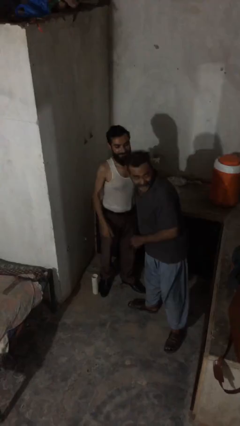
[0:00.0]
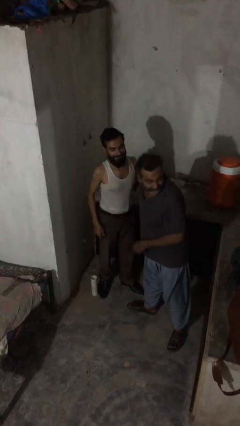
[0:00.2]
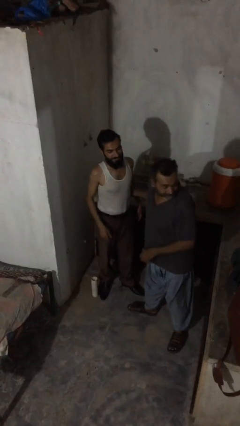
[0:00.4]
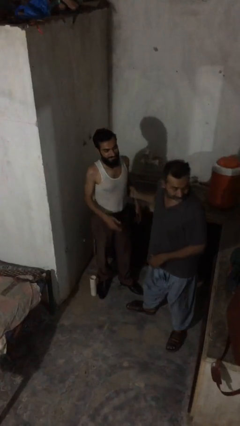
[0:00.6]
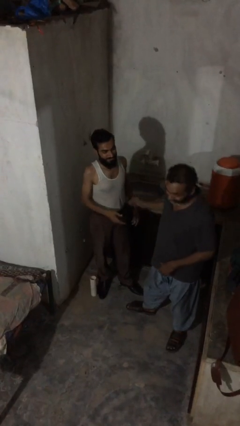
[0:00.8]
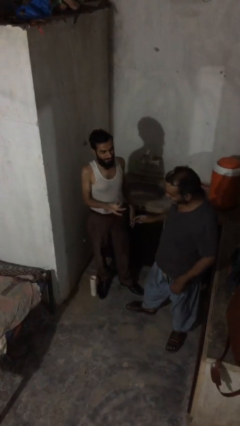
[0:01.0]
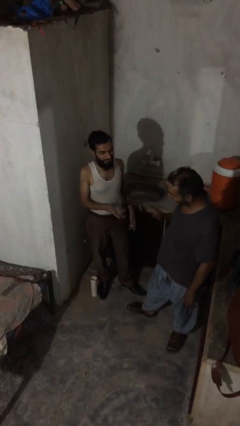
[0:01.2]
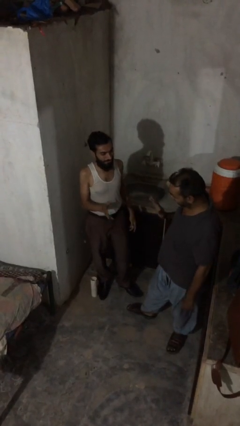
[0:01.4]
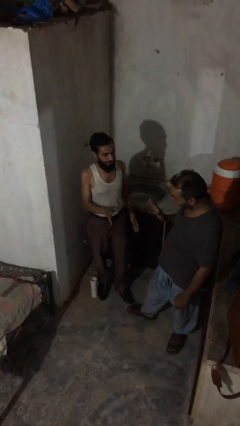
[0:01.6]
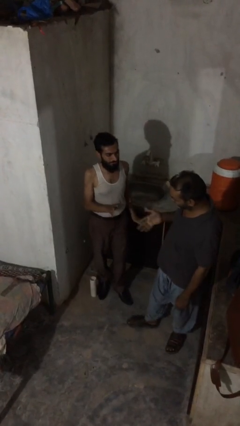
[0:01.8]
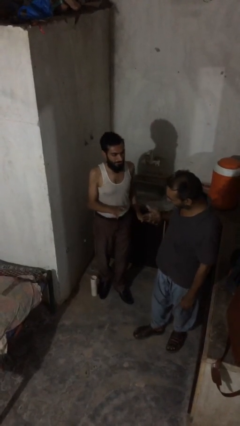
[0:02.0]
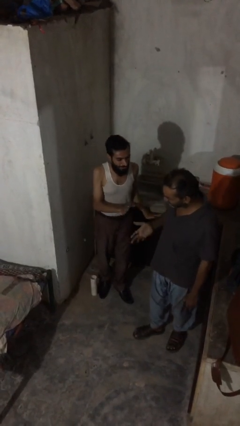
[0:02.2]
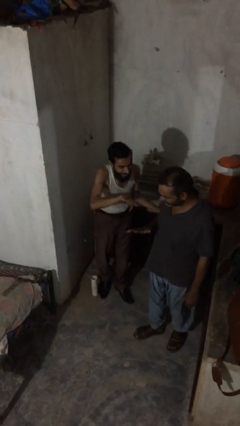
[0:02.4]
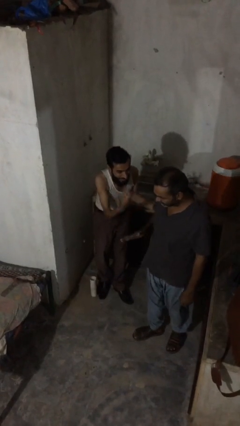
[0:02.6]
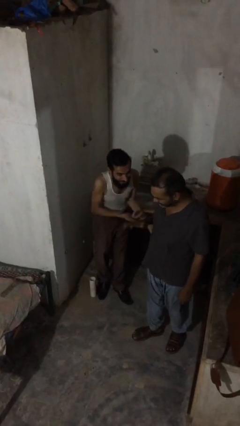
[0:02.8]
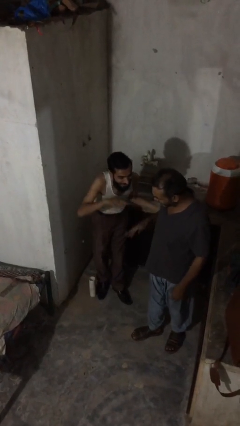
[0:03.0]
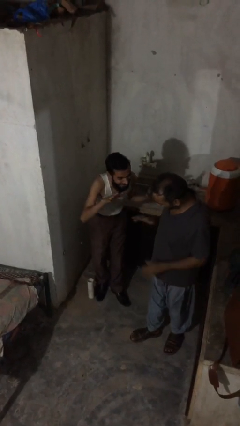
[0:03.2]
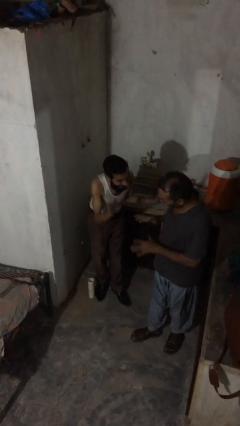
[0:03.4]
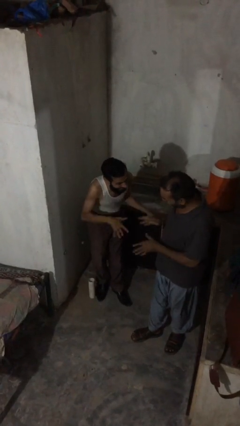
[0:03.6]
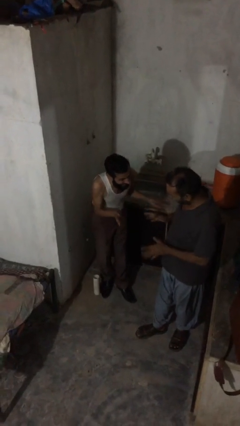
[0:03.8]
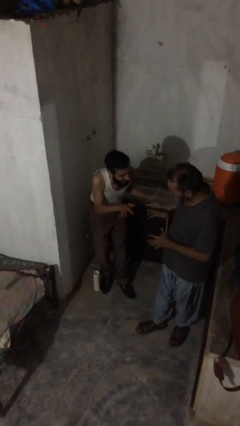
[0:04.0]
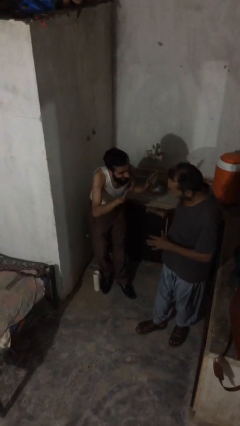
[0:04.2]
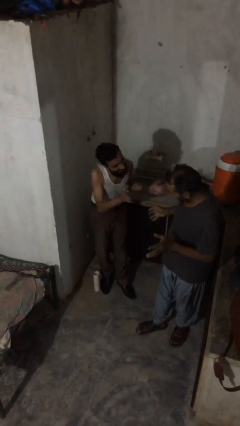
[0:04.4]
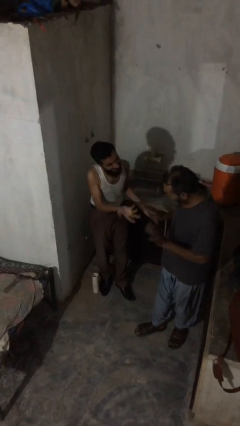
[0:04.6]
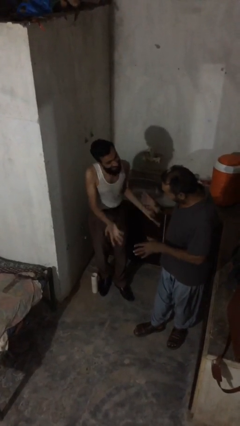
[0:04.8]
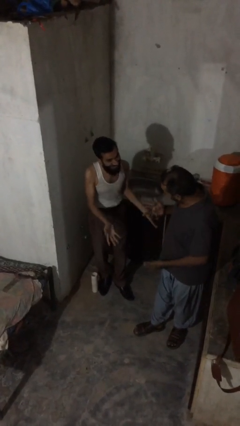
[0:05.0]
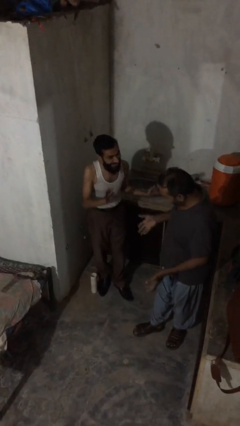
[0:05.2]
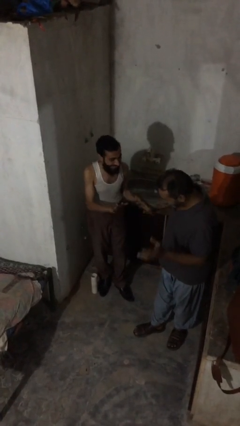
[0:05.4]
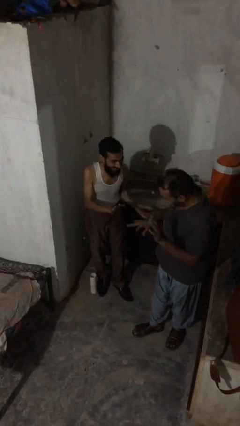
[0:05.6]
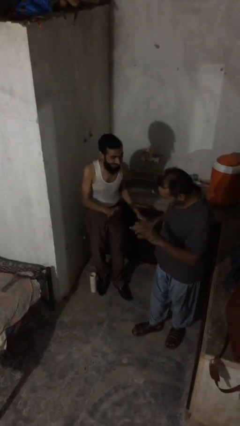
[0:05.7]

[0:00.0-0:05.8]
person talks to person

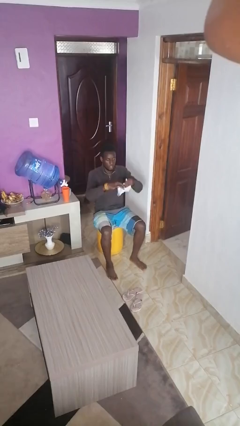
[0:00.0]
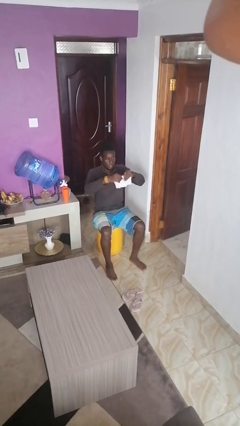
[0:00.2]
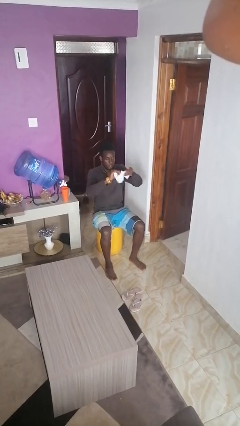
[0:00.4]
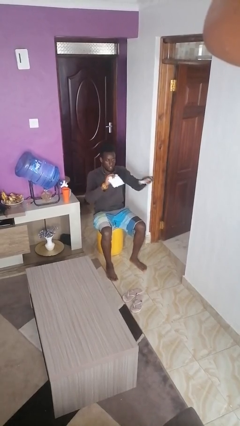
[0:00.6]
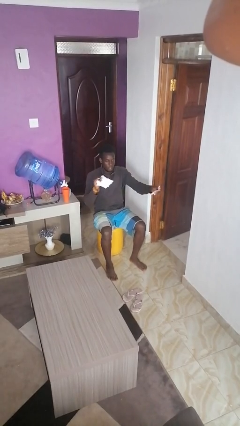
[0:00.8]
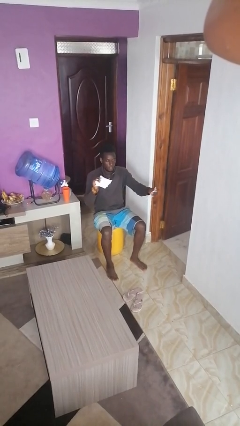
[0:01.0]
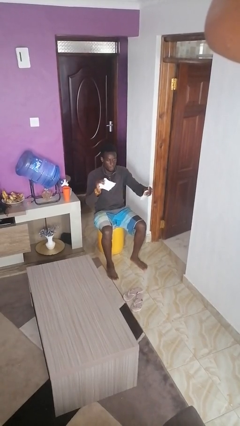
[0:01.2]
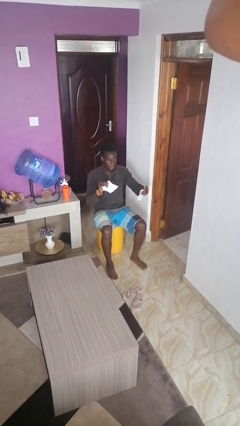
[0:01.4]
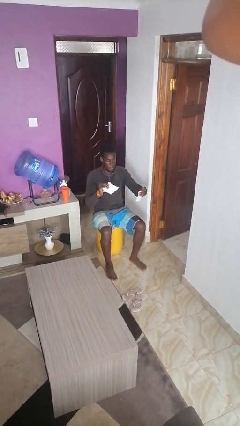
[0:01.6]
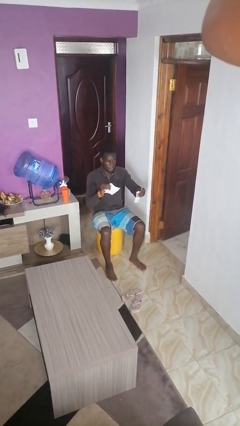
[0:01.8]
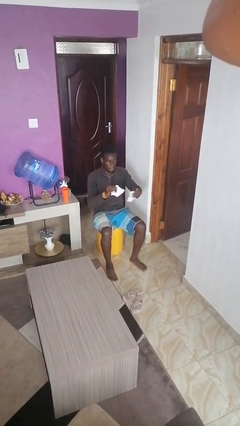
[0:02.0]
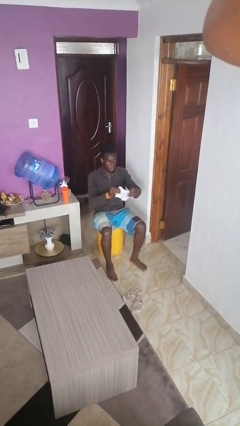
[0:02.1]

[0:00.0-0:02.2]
person tears paper

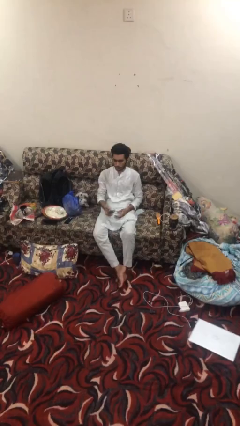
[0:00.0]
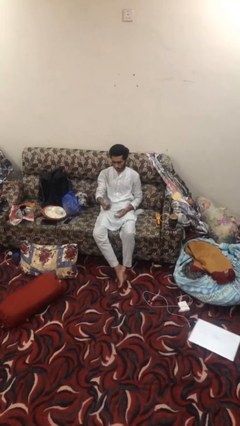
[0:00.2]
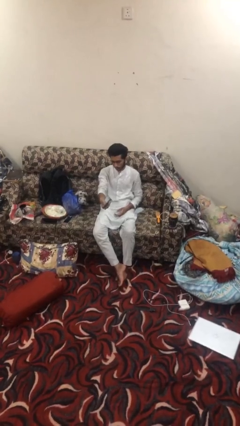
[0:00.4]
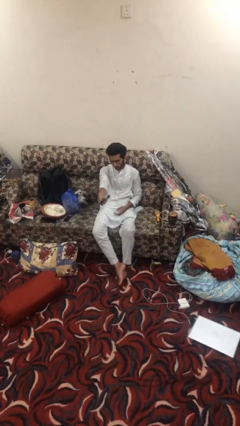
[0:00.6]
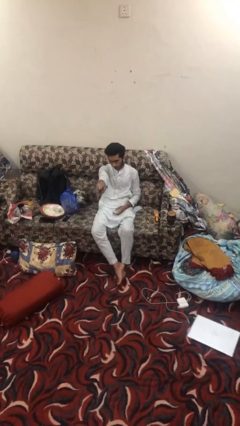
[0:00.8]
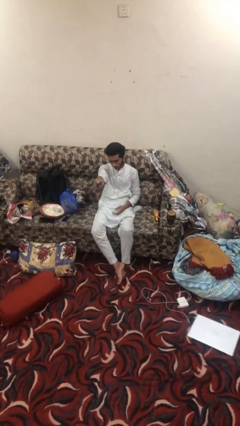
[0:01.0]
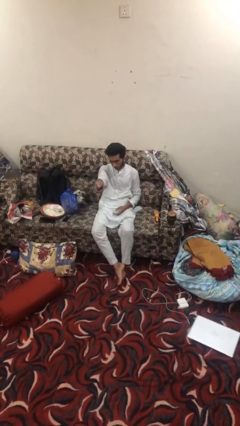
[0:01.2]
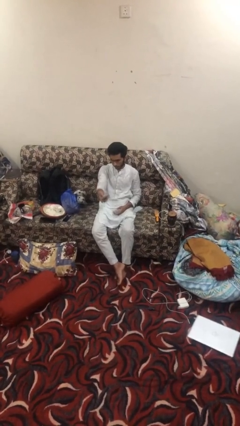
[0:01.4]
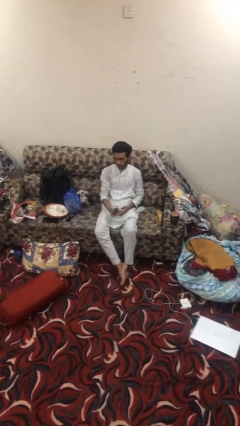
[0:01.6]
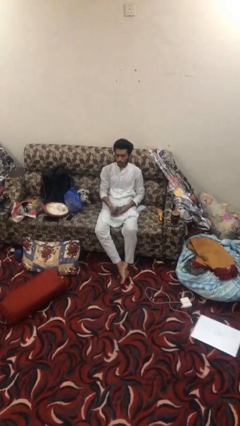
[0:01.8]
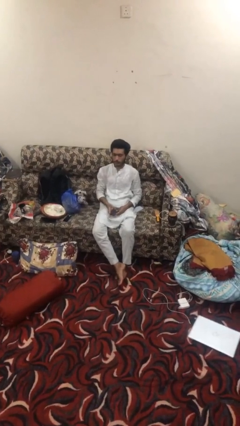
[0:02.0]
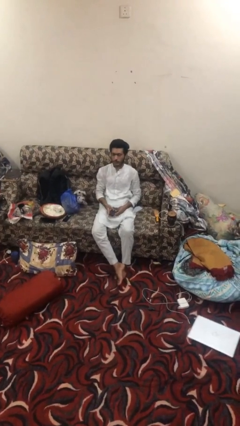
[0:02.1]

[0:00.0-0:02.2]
person uses television remote

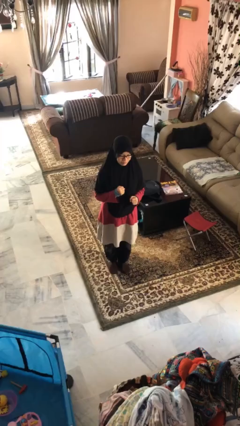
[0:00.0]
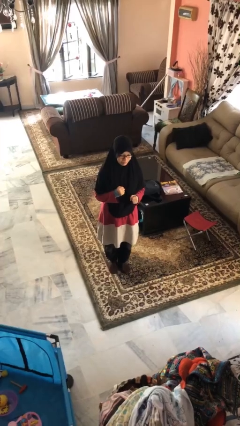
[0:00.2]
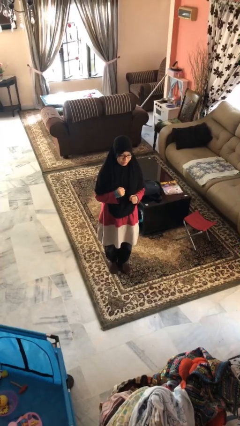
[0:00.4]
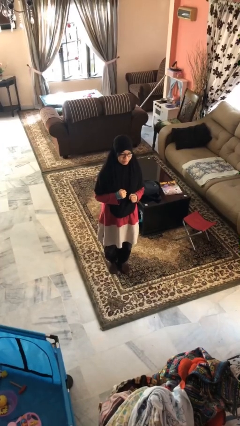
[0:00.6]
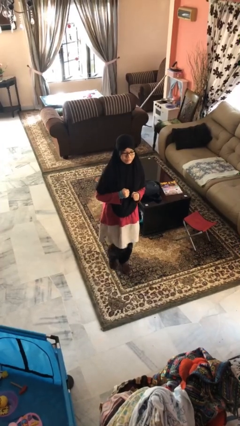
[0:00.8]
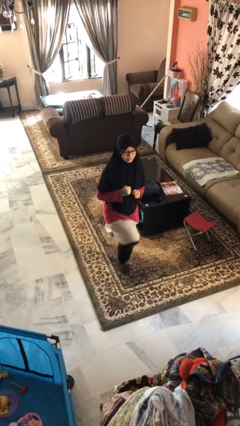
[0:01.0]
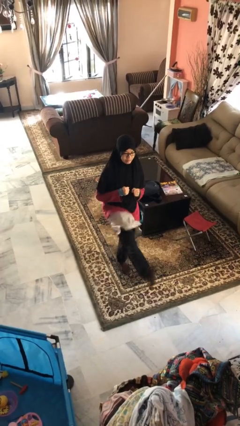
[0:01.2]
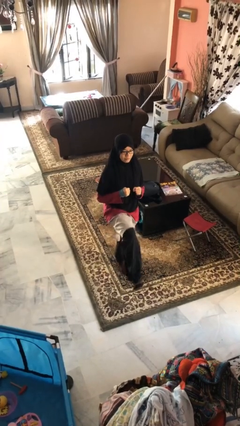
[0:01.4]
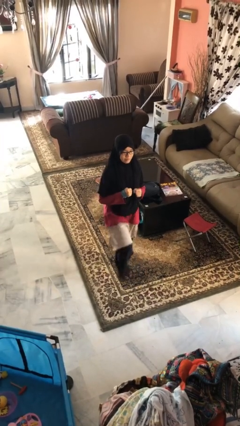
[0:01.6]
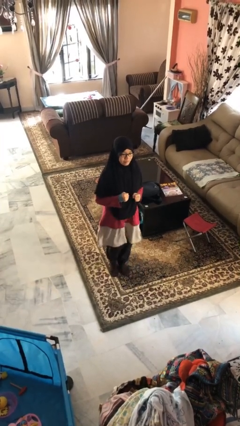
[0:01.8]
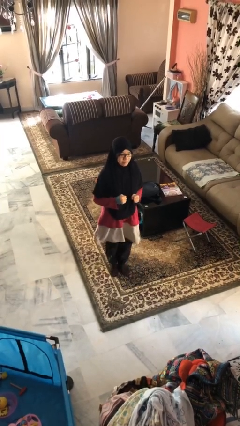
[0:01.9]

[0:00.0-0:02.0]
person karate kicks

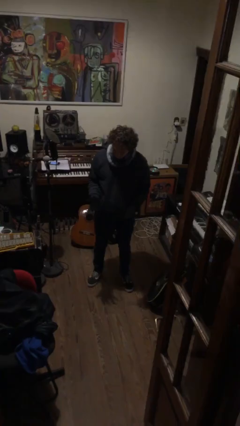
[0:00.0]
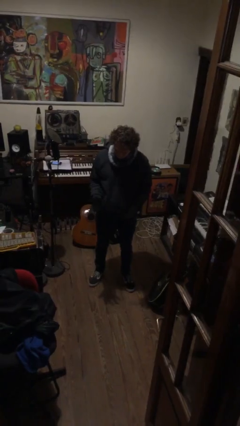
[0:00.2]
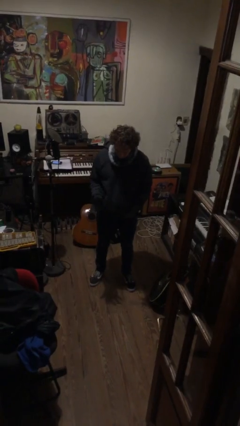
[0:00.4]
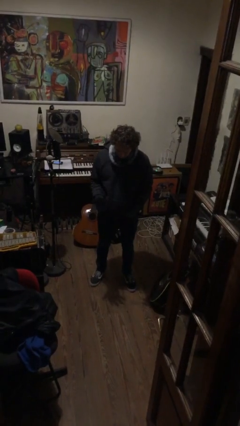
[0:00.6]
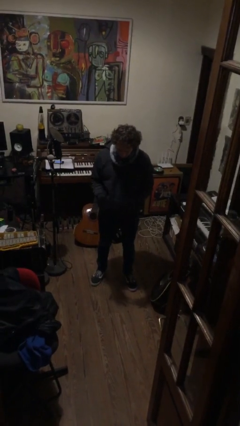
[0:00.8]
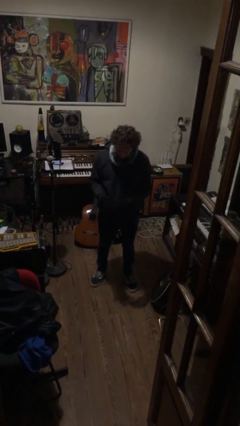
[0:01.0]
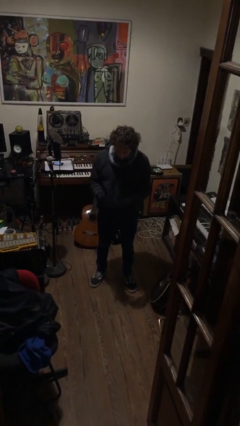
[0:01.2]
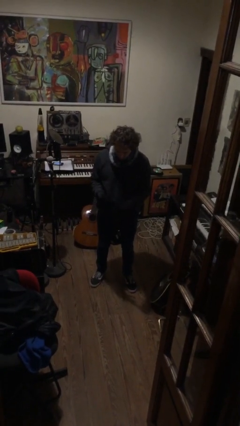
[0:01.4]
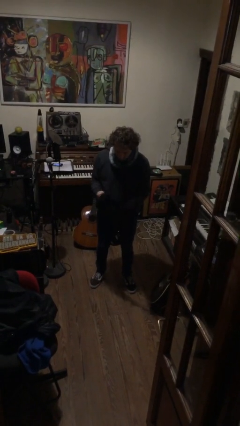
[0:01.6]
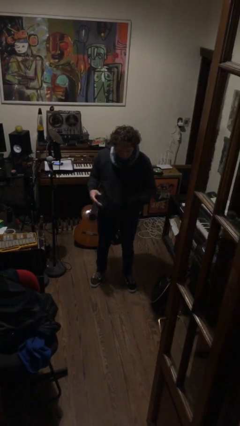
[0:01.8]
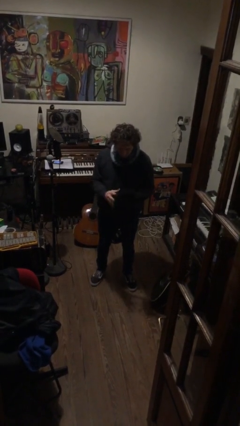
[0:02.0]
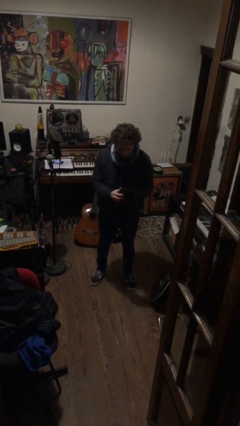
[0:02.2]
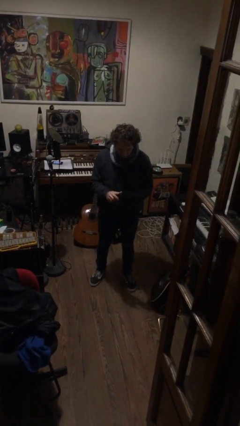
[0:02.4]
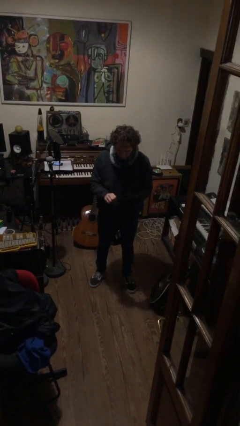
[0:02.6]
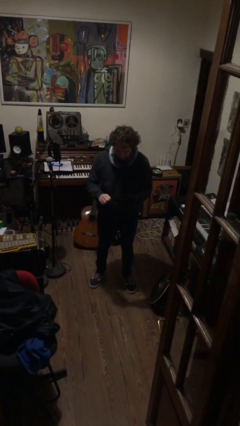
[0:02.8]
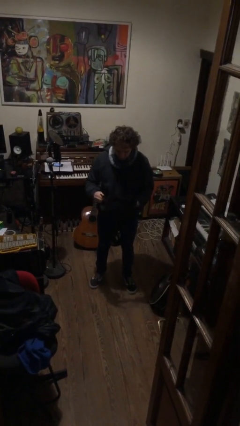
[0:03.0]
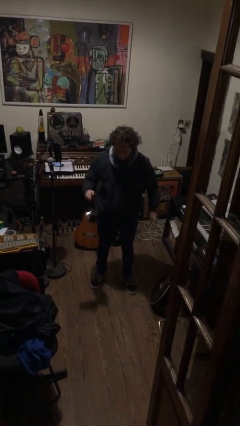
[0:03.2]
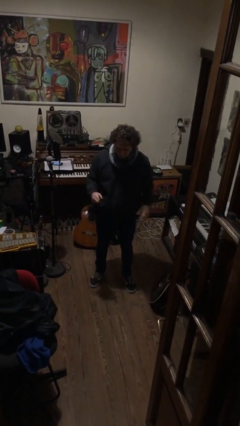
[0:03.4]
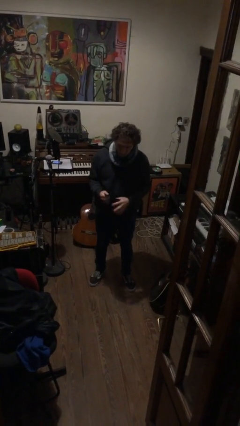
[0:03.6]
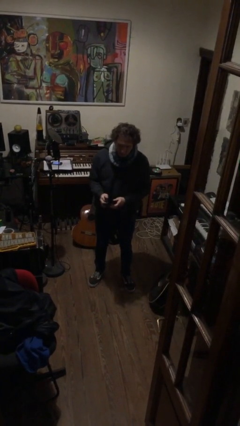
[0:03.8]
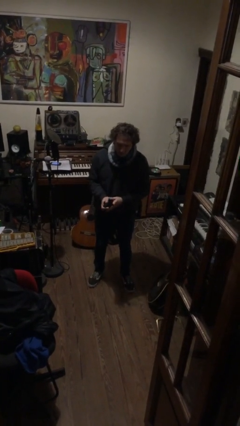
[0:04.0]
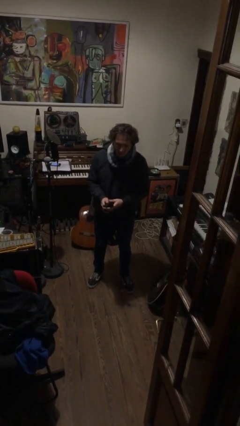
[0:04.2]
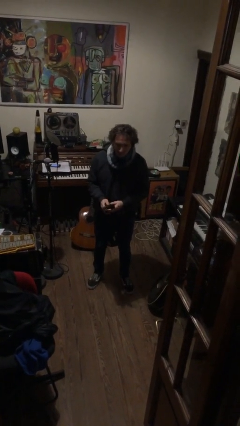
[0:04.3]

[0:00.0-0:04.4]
person takes off gloves

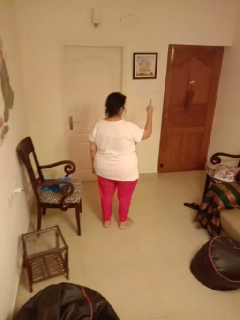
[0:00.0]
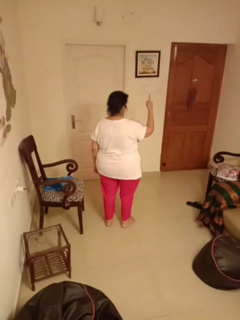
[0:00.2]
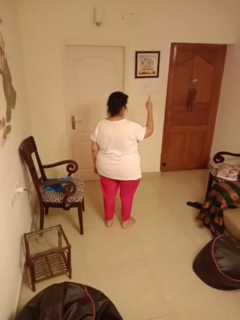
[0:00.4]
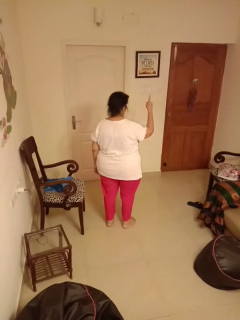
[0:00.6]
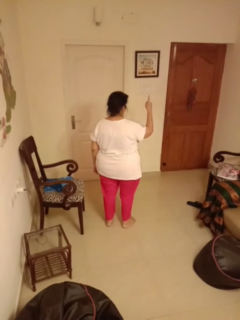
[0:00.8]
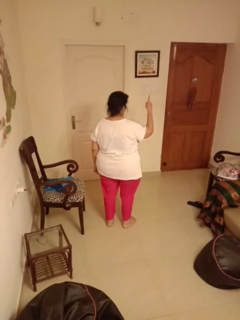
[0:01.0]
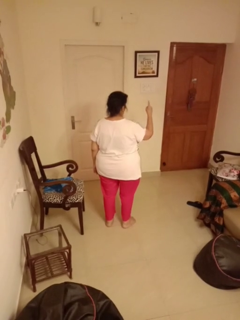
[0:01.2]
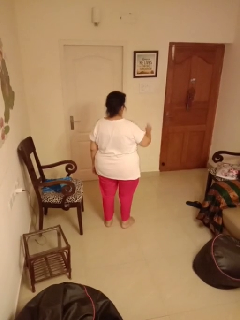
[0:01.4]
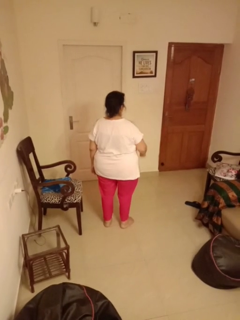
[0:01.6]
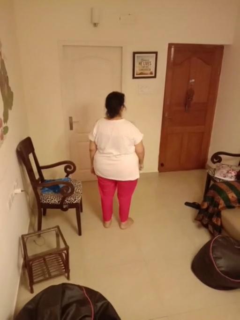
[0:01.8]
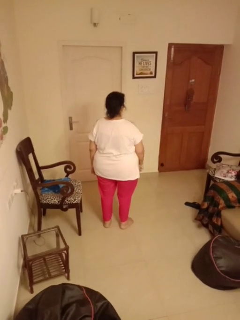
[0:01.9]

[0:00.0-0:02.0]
person gestures number one
